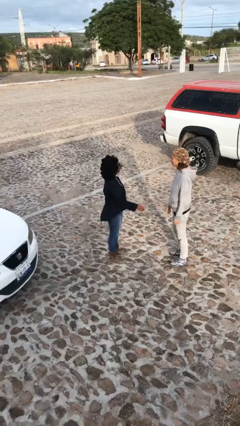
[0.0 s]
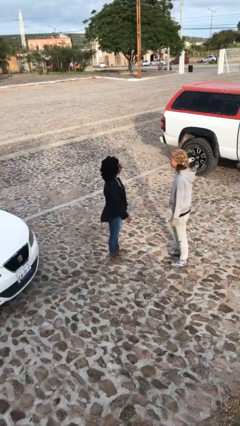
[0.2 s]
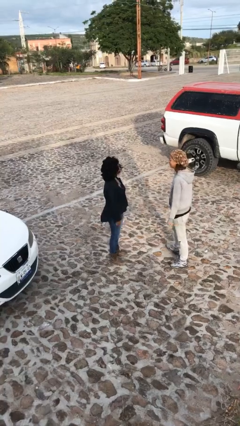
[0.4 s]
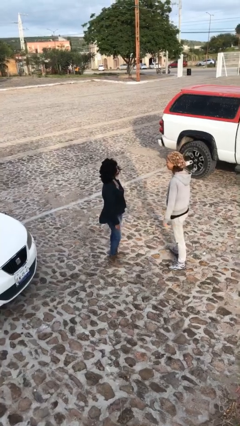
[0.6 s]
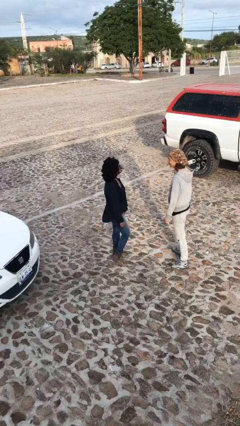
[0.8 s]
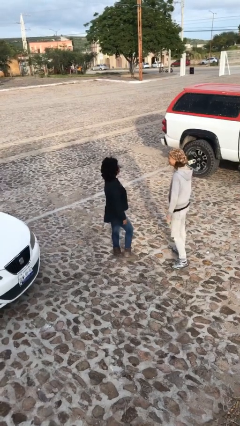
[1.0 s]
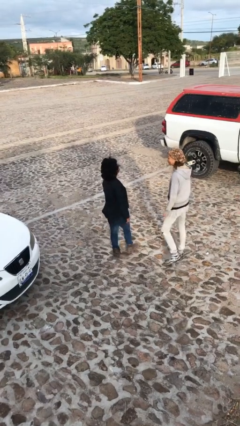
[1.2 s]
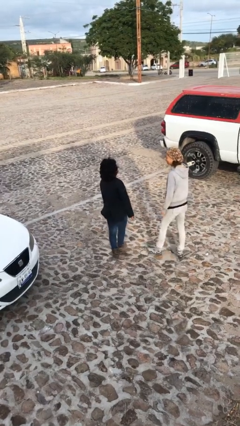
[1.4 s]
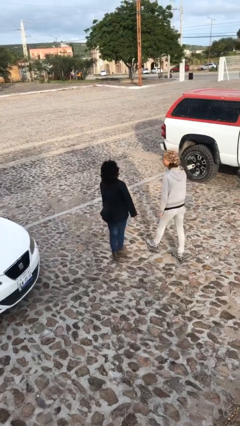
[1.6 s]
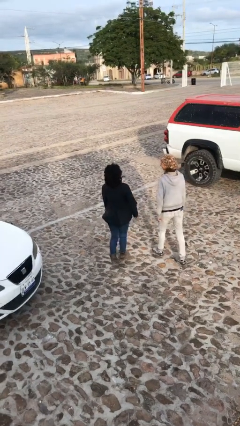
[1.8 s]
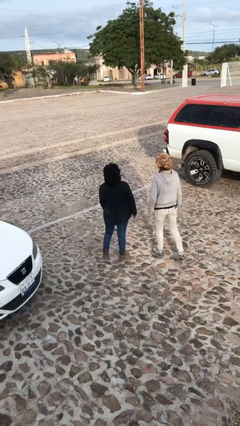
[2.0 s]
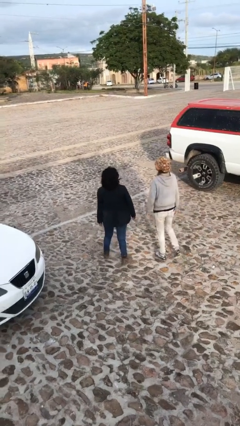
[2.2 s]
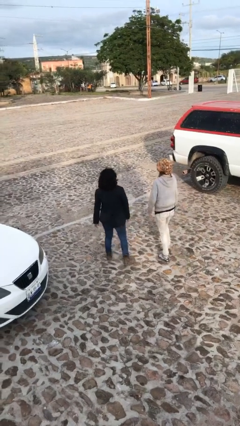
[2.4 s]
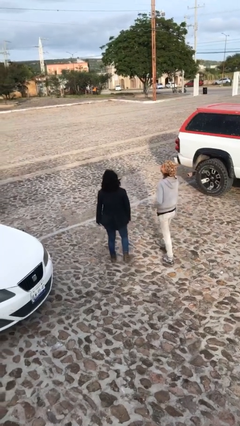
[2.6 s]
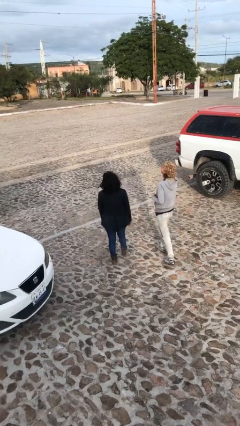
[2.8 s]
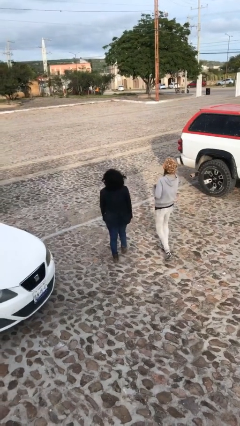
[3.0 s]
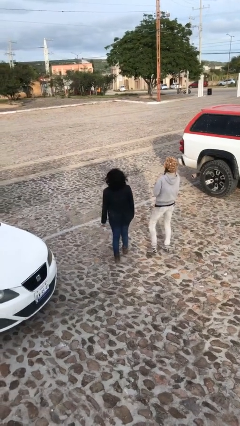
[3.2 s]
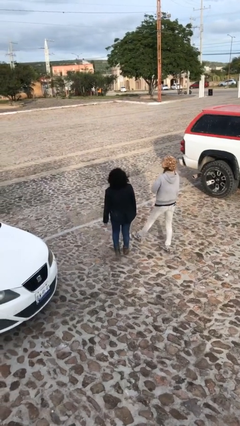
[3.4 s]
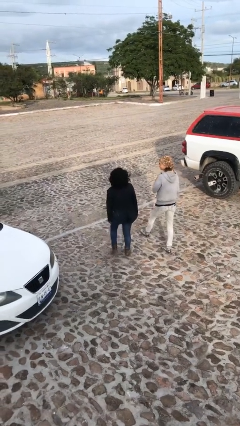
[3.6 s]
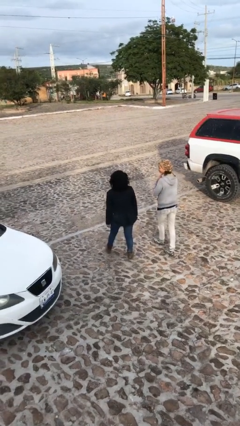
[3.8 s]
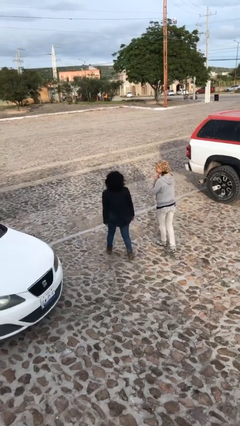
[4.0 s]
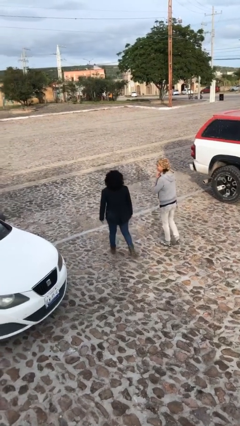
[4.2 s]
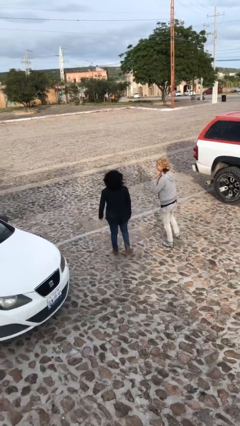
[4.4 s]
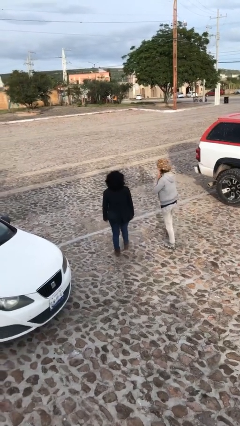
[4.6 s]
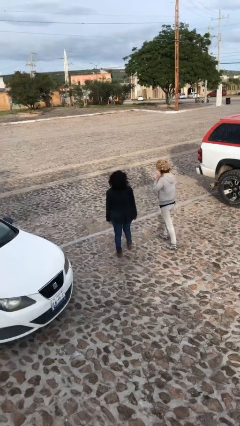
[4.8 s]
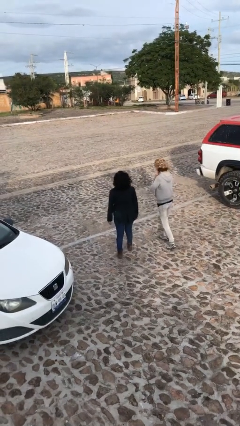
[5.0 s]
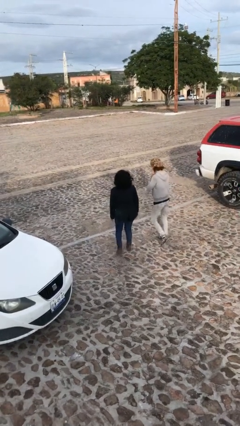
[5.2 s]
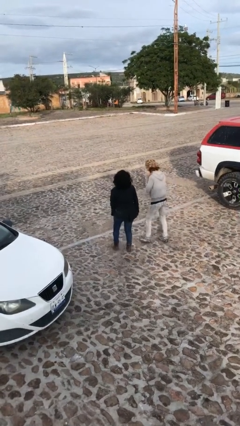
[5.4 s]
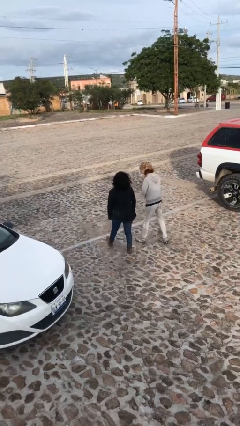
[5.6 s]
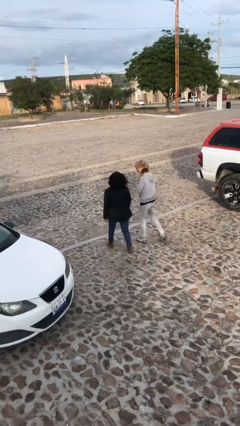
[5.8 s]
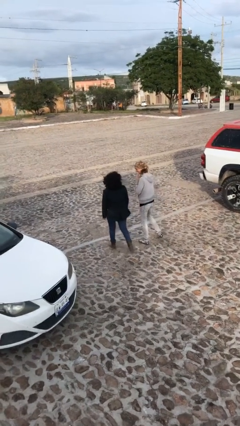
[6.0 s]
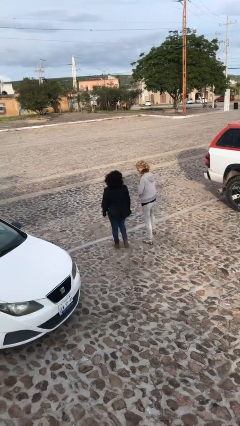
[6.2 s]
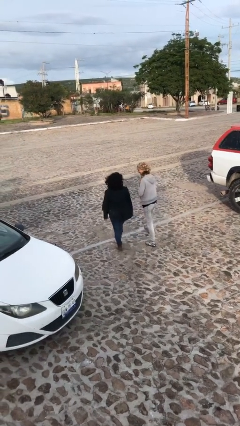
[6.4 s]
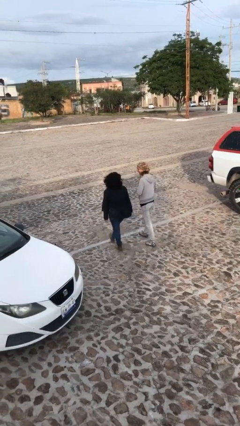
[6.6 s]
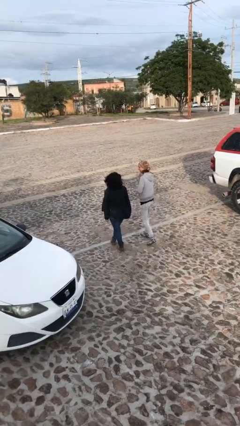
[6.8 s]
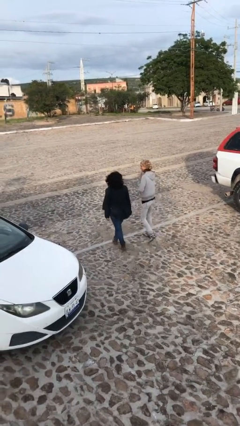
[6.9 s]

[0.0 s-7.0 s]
person talks to person

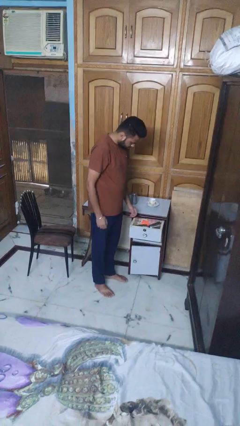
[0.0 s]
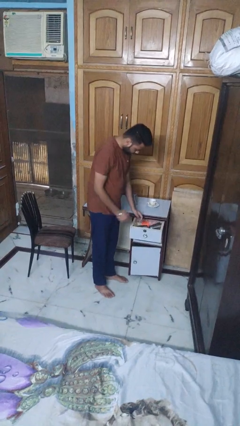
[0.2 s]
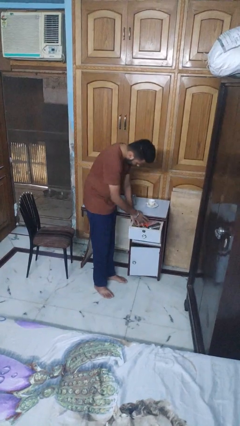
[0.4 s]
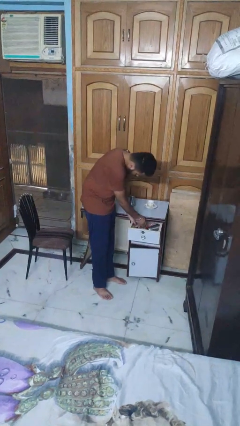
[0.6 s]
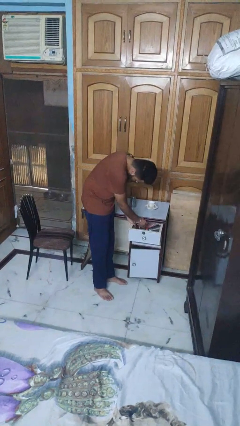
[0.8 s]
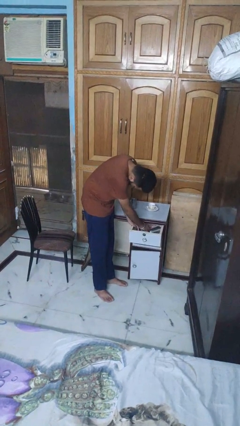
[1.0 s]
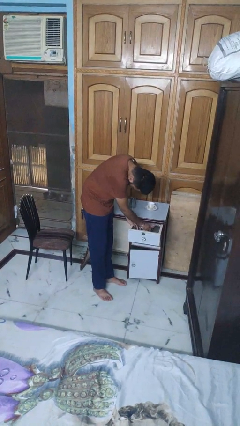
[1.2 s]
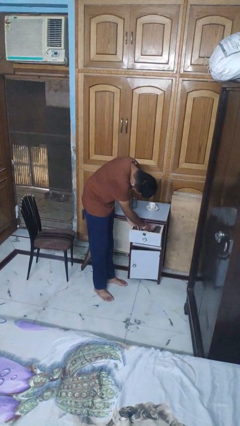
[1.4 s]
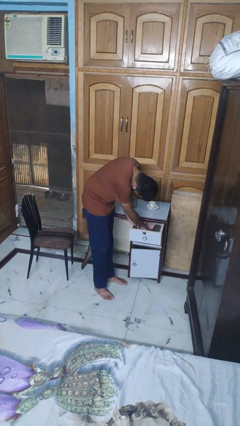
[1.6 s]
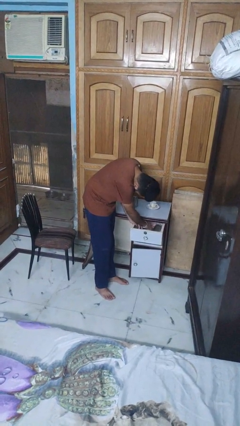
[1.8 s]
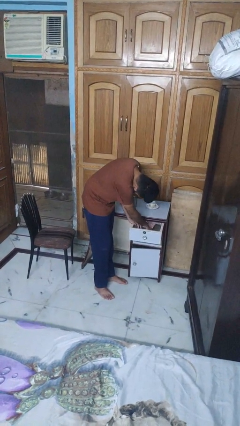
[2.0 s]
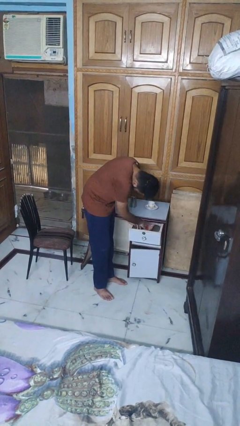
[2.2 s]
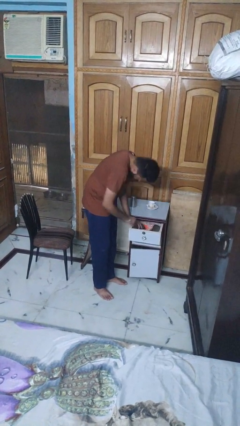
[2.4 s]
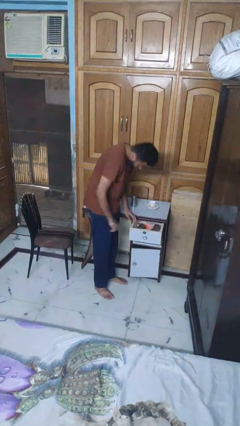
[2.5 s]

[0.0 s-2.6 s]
person searches in kitchen drawer

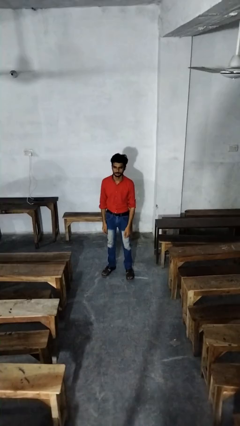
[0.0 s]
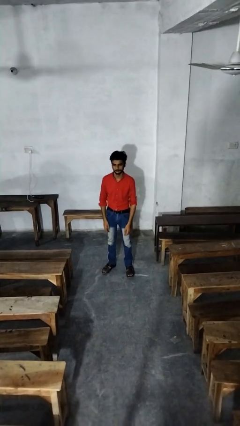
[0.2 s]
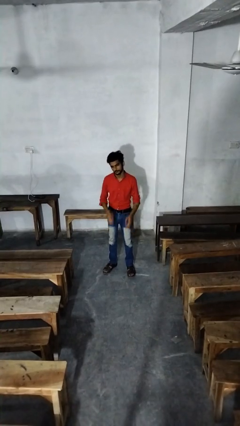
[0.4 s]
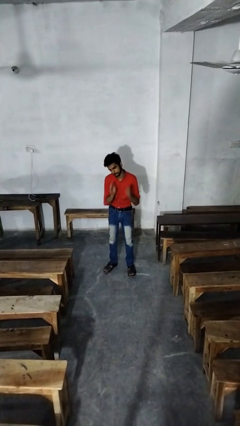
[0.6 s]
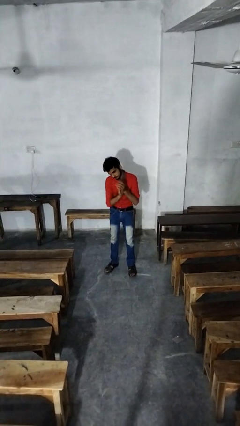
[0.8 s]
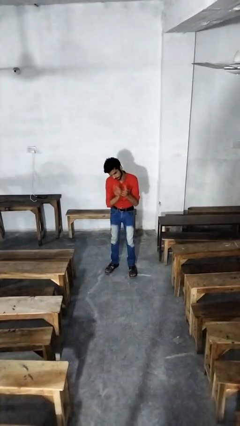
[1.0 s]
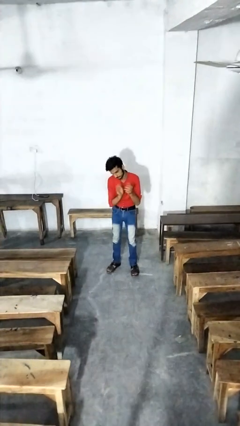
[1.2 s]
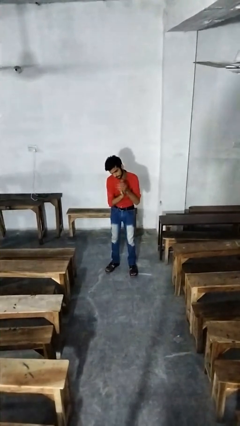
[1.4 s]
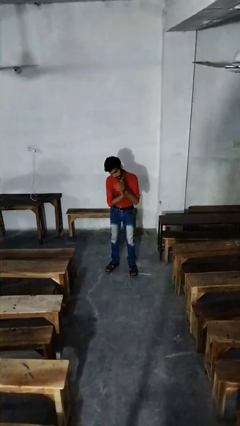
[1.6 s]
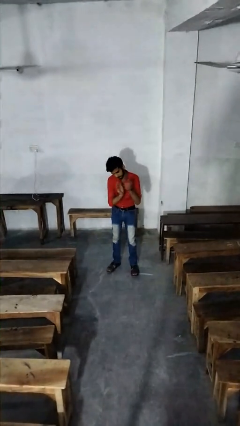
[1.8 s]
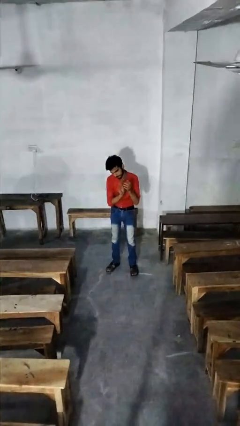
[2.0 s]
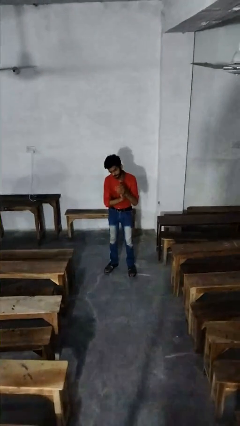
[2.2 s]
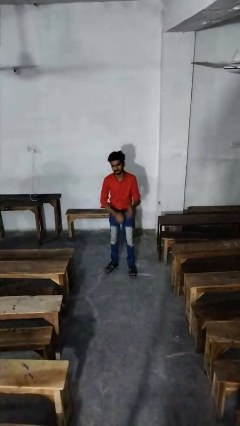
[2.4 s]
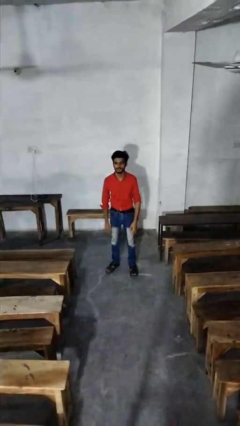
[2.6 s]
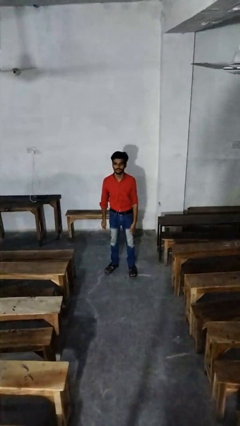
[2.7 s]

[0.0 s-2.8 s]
person claps hands

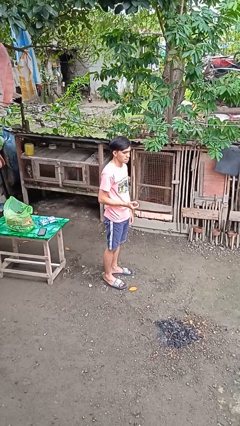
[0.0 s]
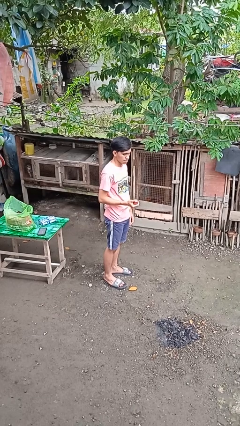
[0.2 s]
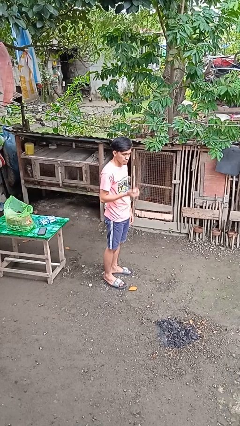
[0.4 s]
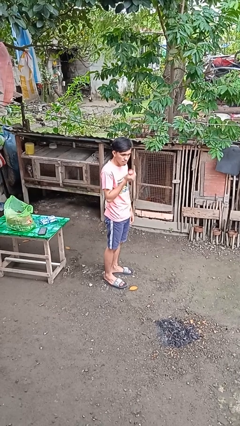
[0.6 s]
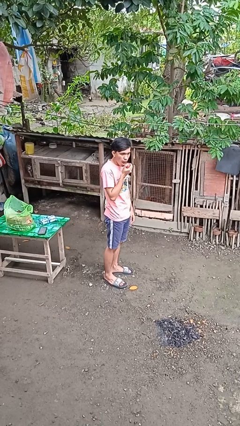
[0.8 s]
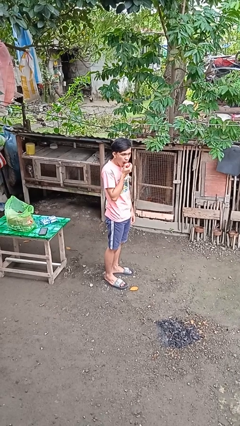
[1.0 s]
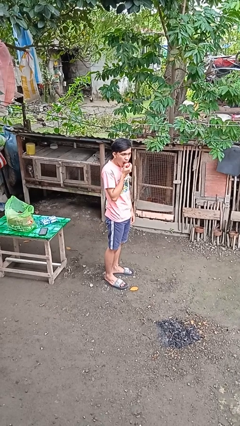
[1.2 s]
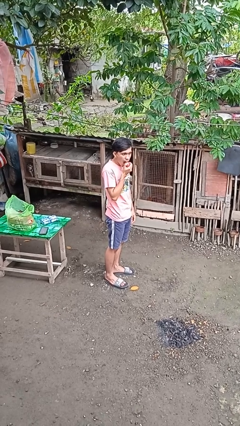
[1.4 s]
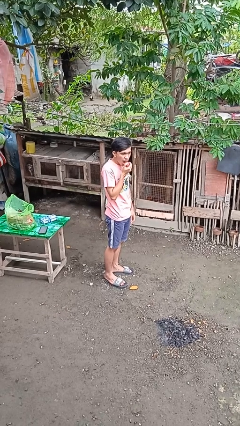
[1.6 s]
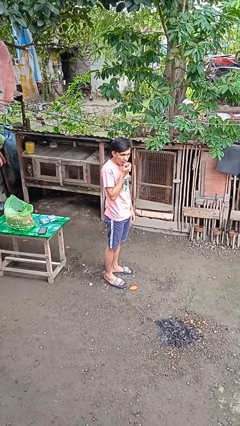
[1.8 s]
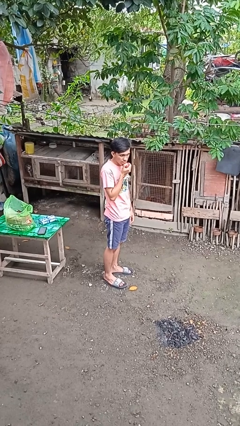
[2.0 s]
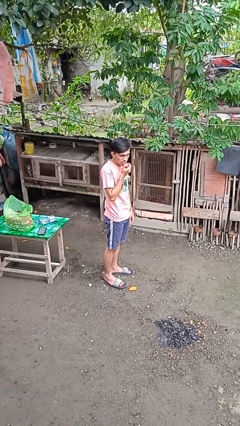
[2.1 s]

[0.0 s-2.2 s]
person eats apple

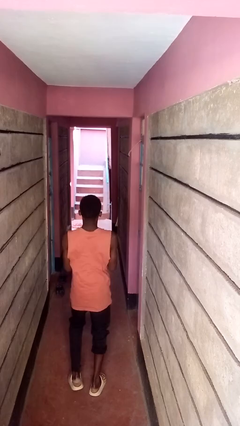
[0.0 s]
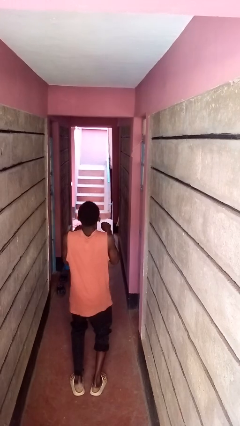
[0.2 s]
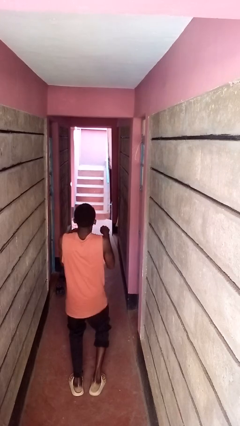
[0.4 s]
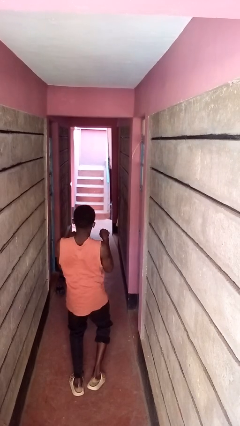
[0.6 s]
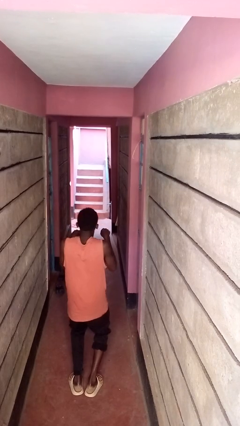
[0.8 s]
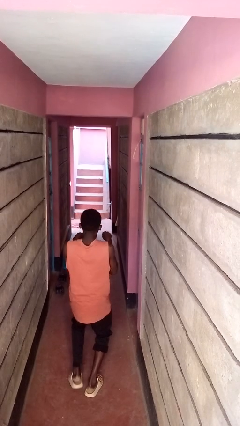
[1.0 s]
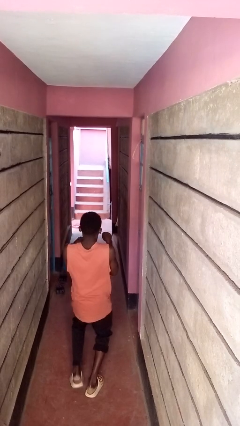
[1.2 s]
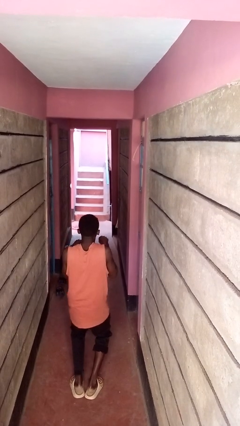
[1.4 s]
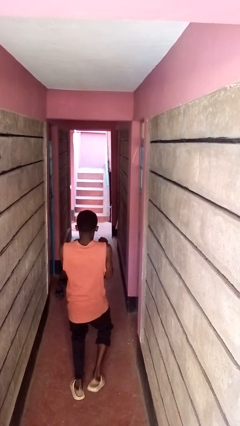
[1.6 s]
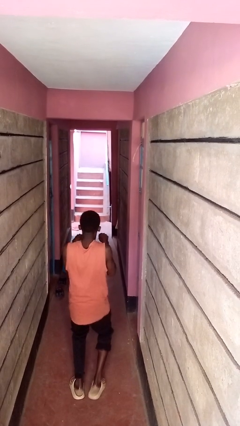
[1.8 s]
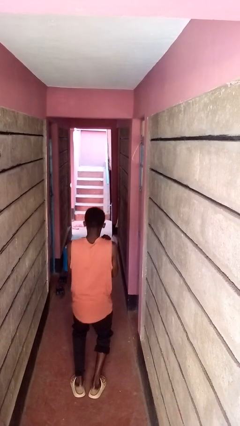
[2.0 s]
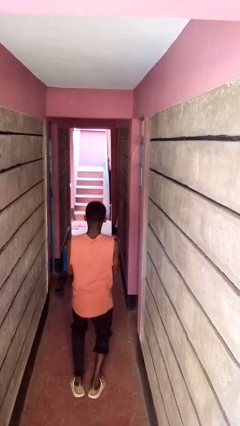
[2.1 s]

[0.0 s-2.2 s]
person dances in place

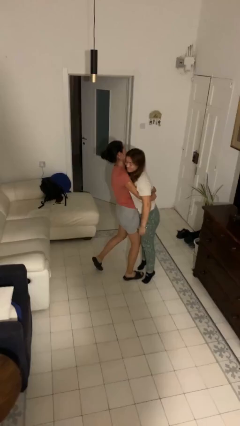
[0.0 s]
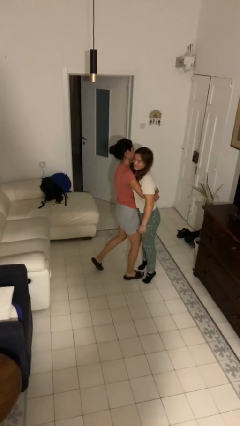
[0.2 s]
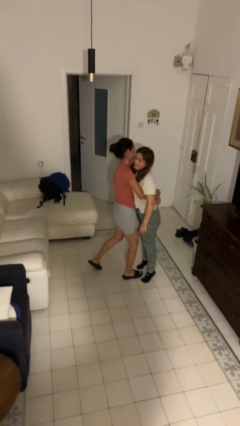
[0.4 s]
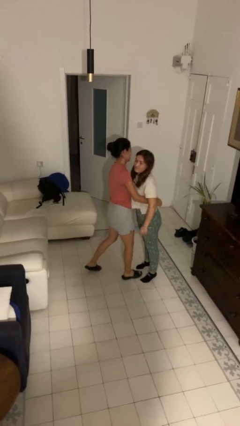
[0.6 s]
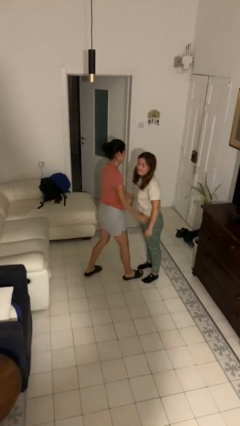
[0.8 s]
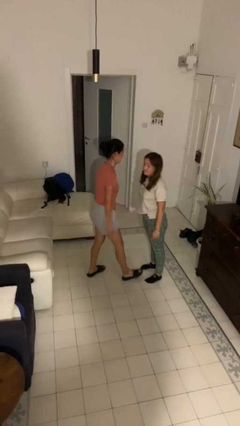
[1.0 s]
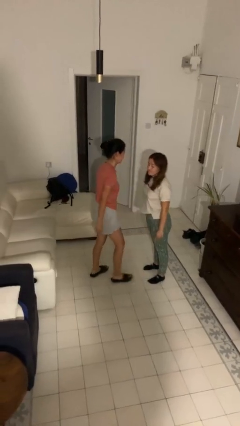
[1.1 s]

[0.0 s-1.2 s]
person puts down person
